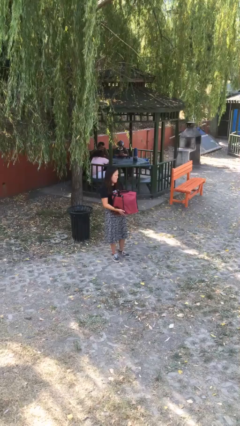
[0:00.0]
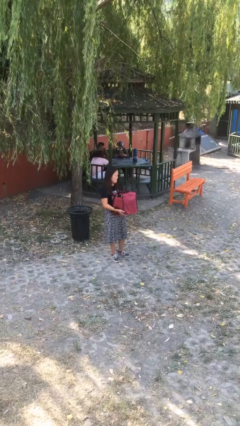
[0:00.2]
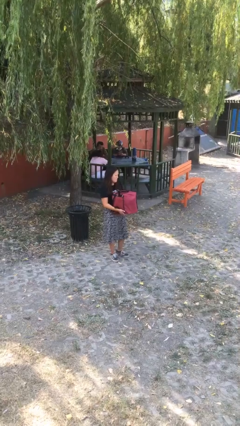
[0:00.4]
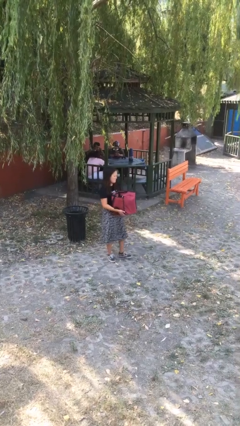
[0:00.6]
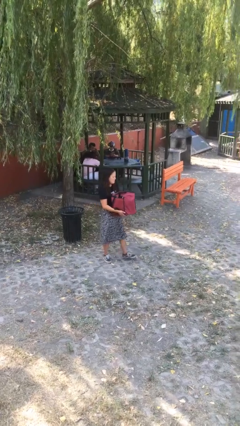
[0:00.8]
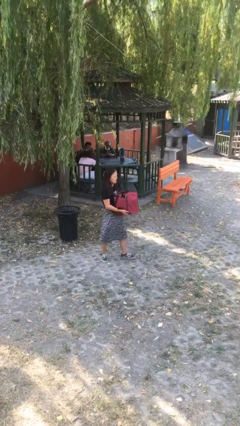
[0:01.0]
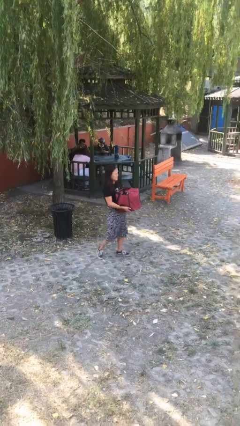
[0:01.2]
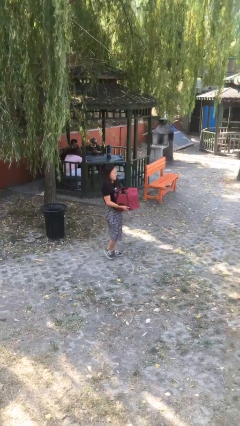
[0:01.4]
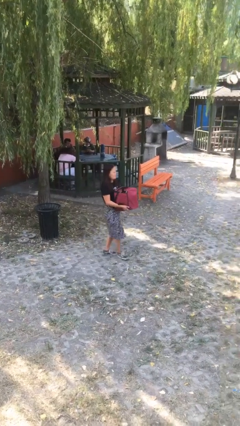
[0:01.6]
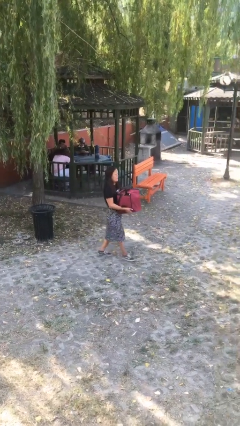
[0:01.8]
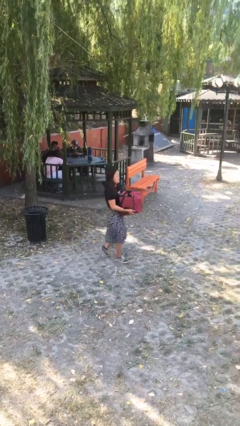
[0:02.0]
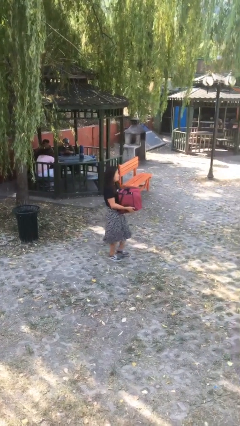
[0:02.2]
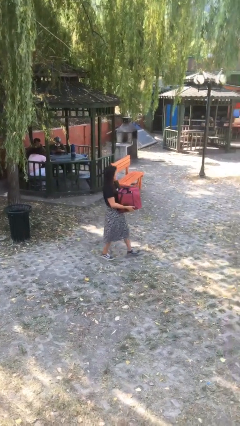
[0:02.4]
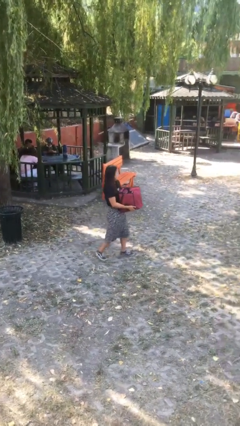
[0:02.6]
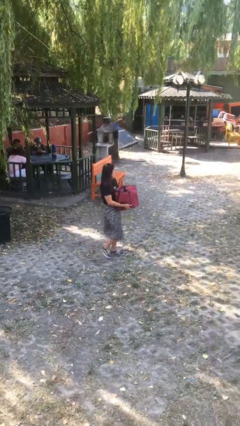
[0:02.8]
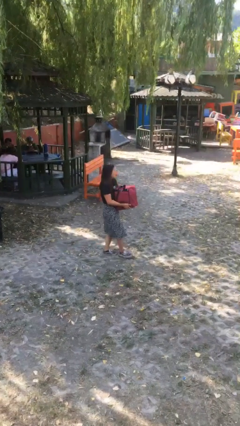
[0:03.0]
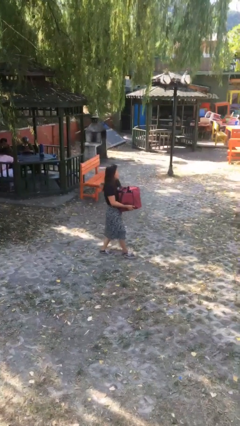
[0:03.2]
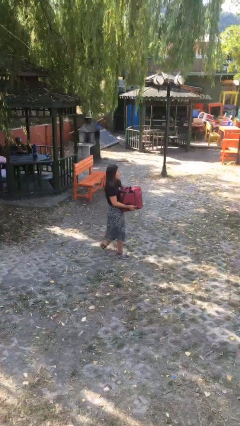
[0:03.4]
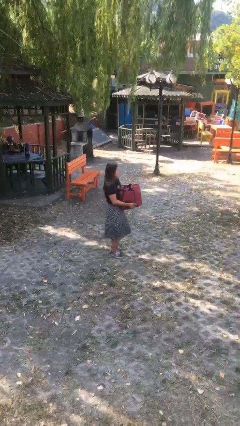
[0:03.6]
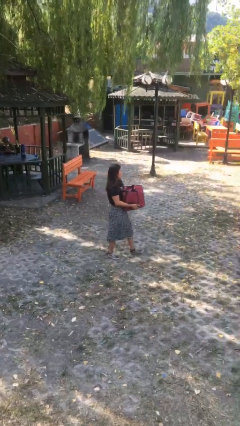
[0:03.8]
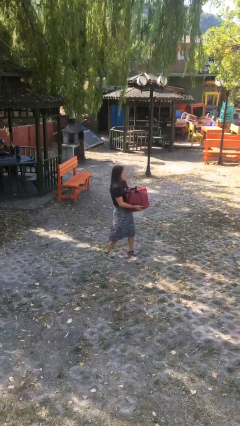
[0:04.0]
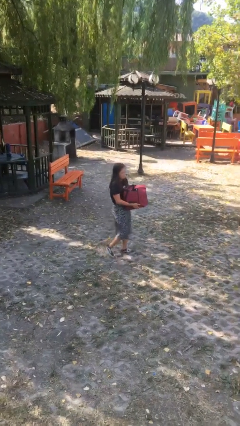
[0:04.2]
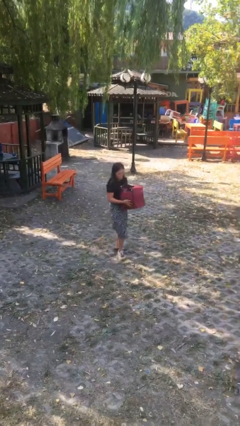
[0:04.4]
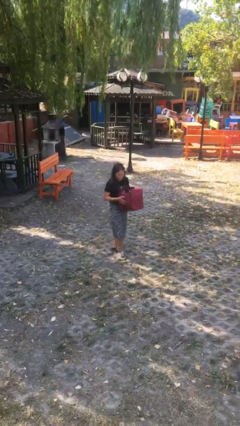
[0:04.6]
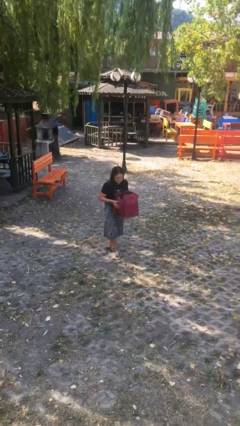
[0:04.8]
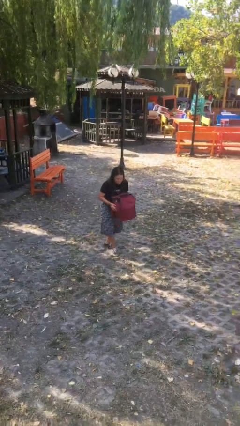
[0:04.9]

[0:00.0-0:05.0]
person carries heavy object

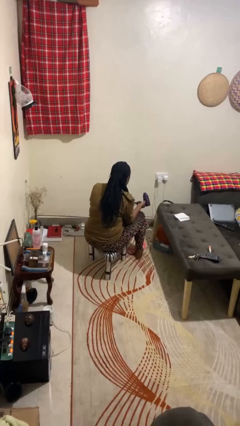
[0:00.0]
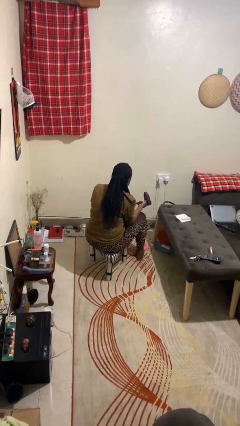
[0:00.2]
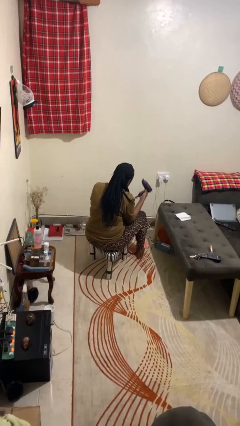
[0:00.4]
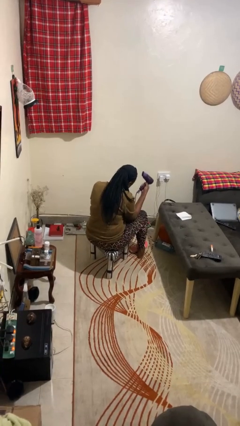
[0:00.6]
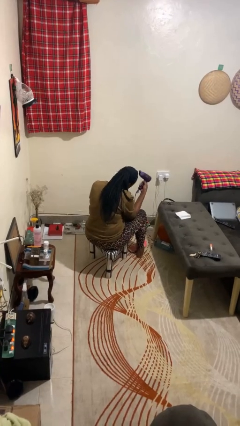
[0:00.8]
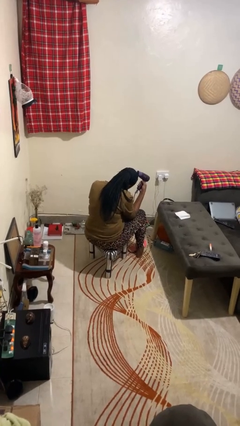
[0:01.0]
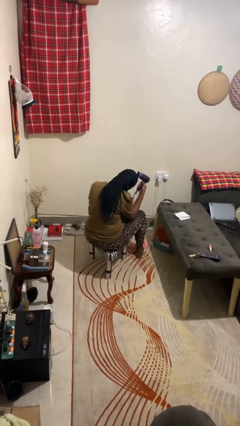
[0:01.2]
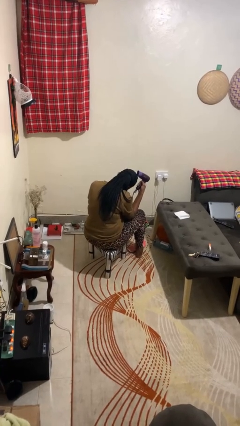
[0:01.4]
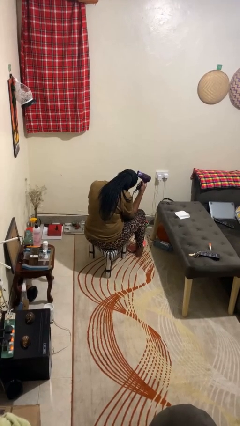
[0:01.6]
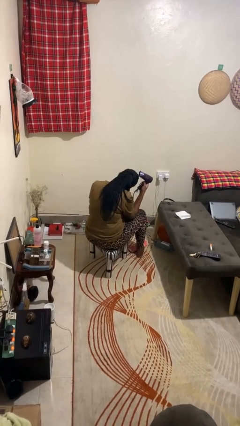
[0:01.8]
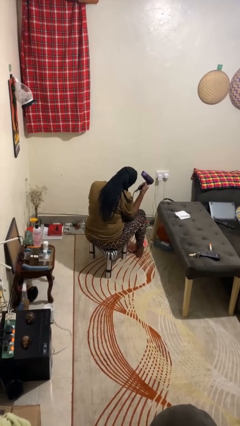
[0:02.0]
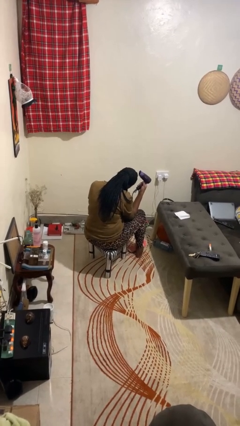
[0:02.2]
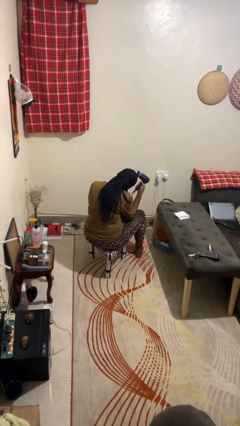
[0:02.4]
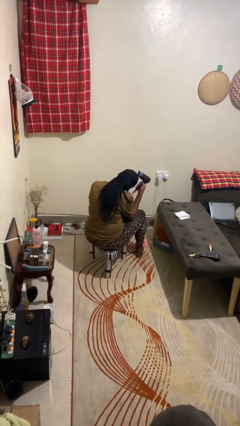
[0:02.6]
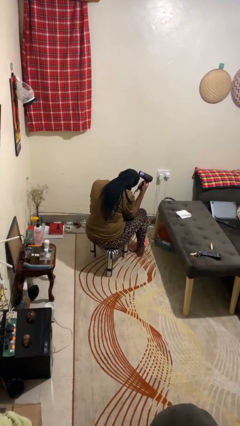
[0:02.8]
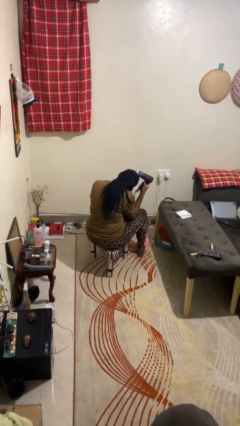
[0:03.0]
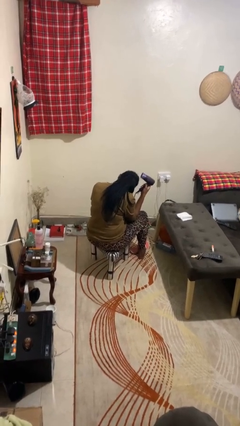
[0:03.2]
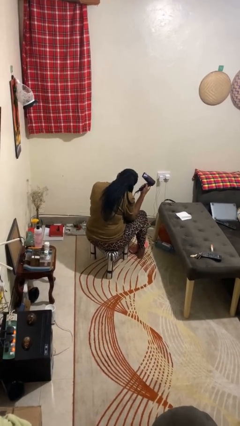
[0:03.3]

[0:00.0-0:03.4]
person dries hair with hairdryer

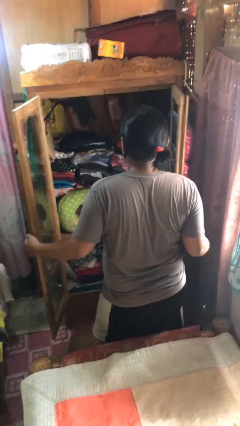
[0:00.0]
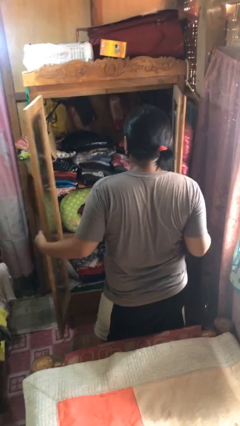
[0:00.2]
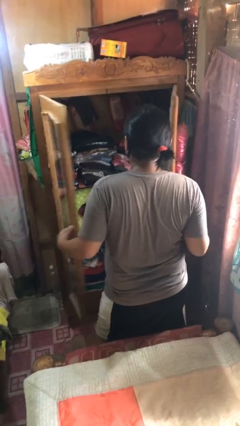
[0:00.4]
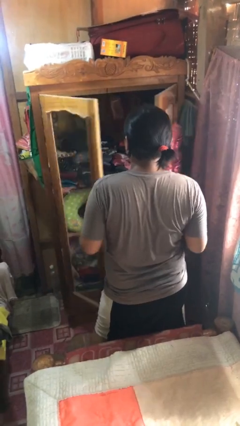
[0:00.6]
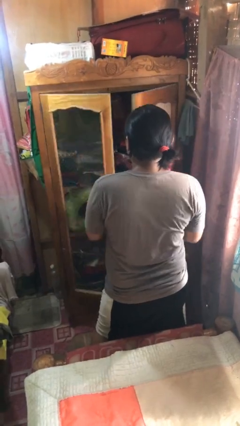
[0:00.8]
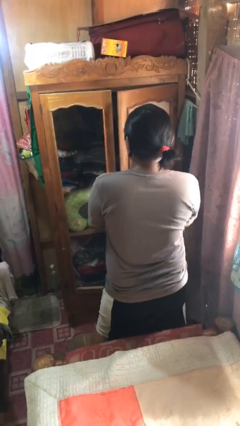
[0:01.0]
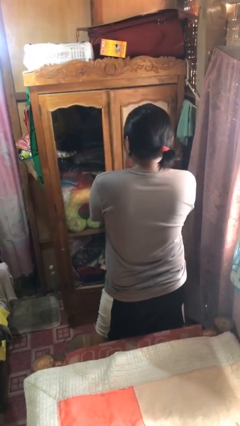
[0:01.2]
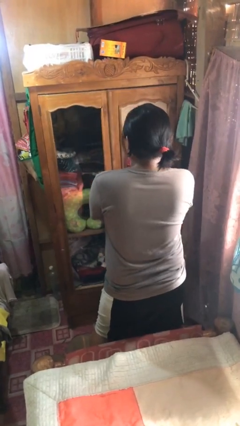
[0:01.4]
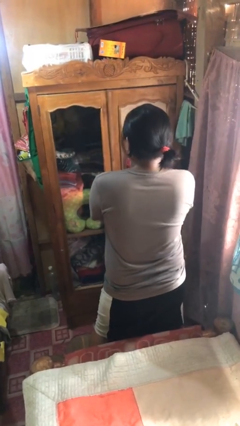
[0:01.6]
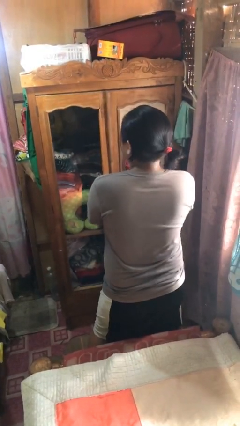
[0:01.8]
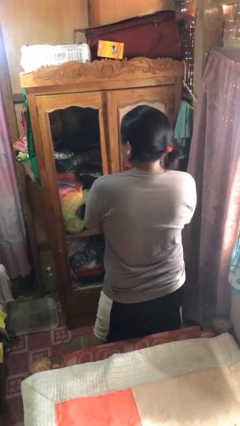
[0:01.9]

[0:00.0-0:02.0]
person closes closet door

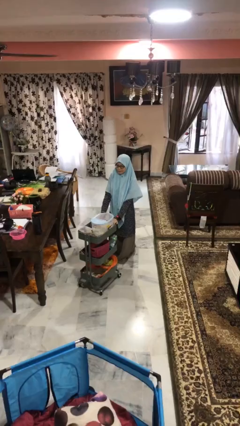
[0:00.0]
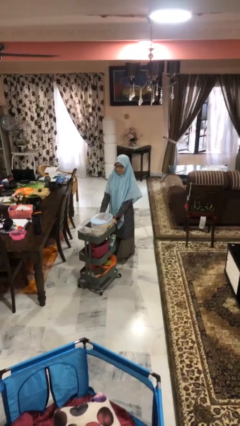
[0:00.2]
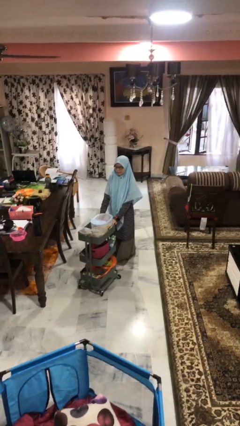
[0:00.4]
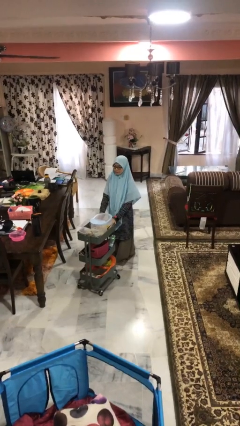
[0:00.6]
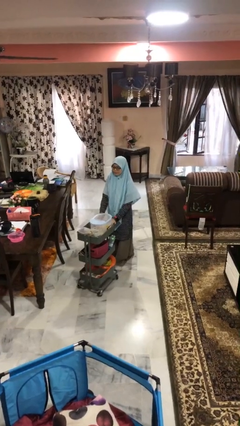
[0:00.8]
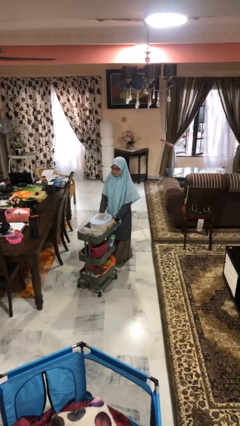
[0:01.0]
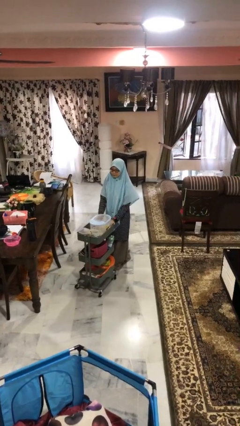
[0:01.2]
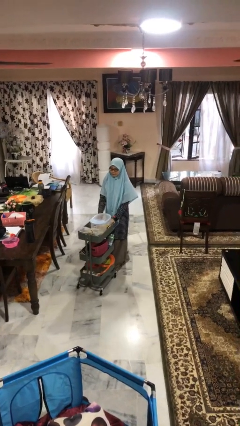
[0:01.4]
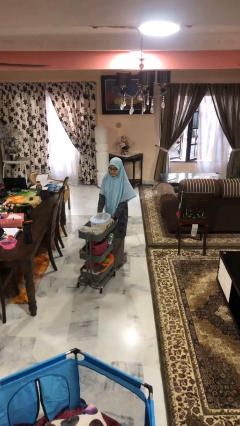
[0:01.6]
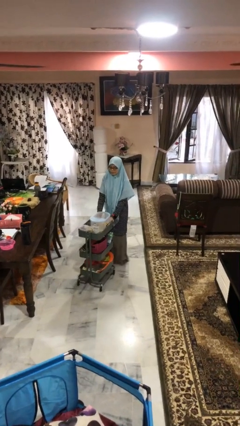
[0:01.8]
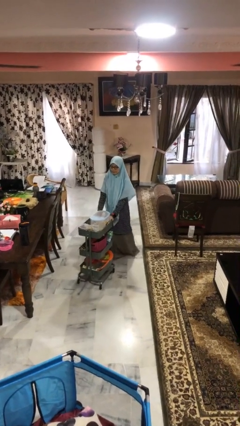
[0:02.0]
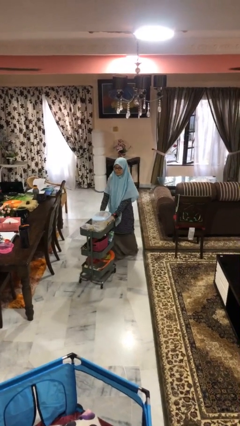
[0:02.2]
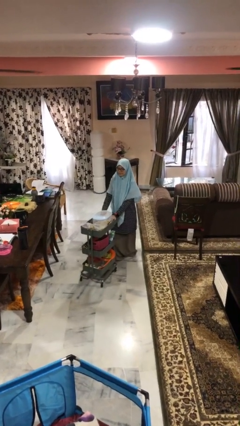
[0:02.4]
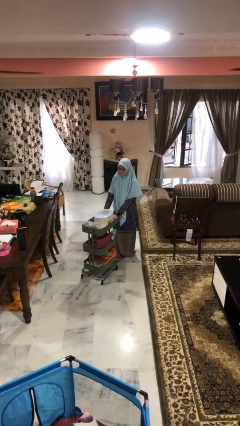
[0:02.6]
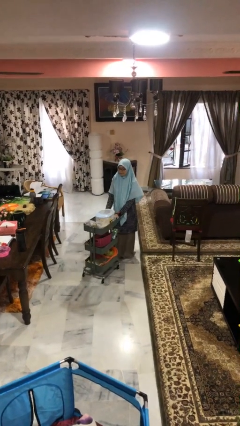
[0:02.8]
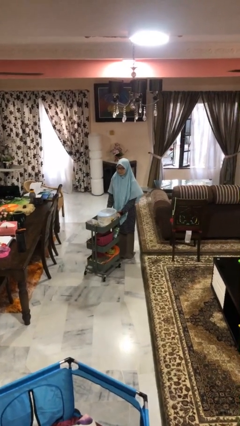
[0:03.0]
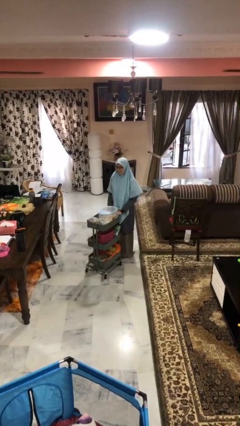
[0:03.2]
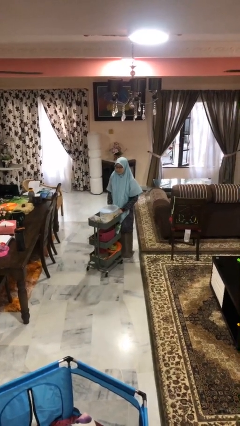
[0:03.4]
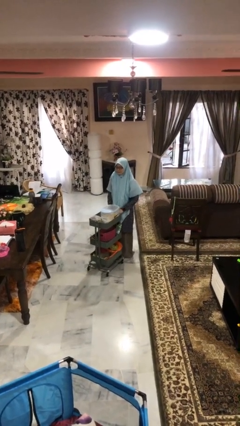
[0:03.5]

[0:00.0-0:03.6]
person pulls wheeled cart

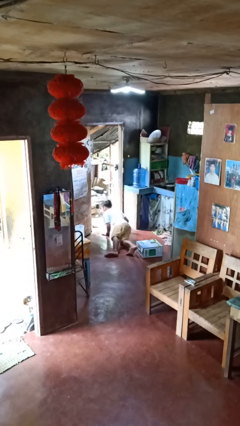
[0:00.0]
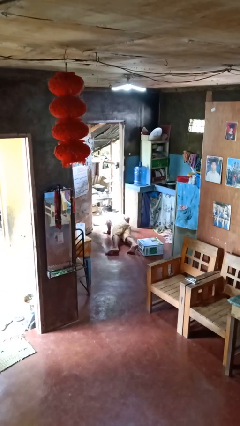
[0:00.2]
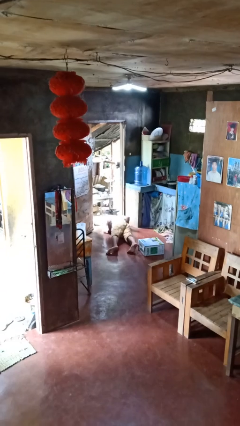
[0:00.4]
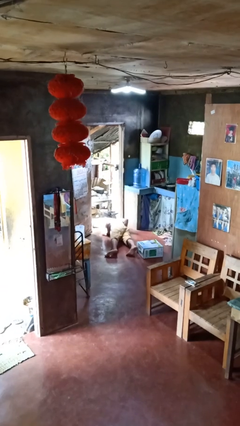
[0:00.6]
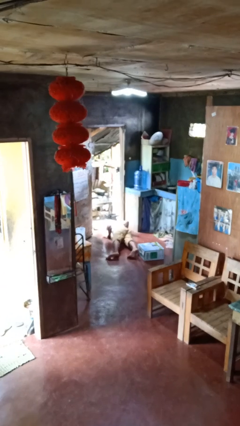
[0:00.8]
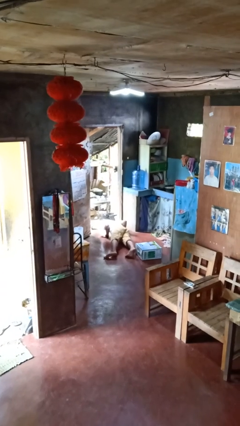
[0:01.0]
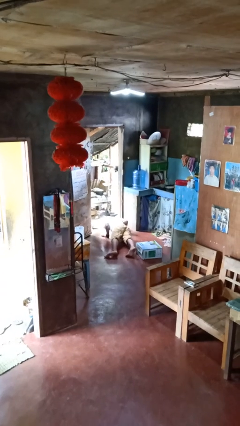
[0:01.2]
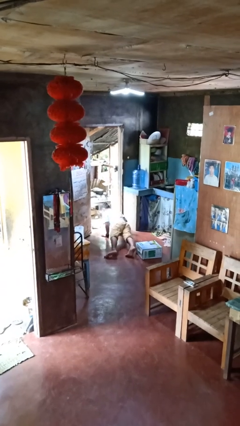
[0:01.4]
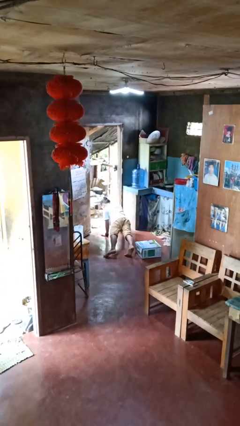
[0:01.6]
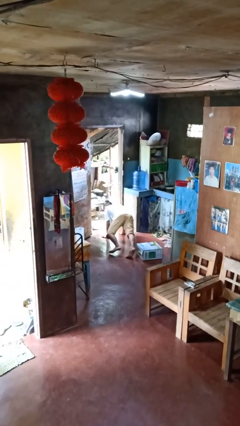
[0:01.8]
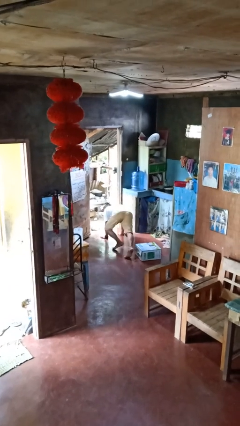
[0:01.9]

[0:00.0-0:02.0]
person lies down on floor

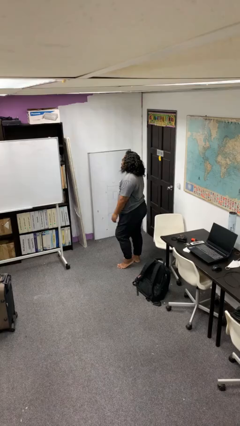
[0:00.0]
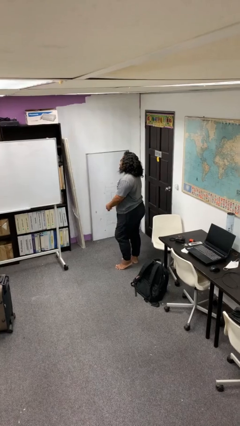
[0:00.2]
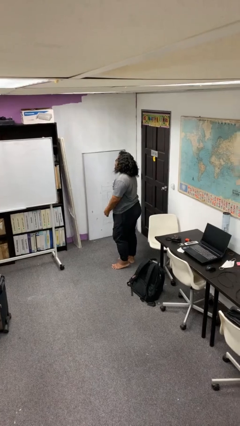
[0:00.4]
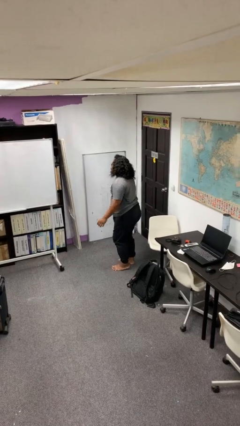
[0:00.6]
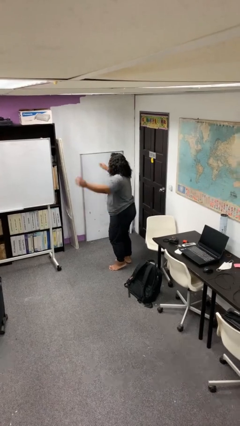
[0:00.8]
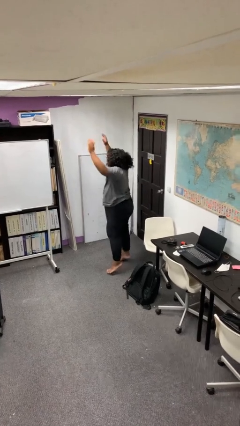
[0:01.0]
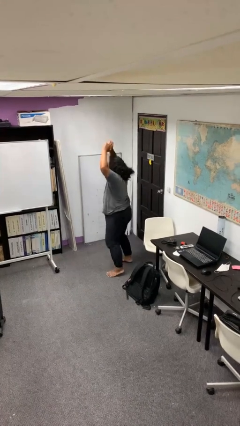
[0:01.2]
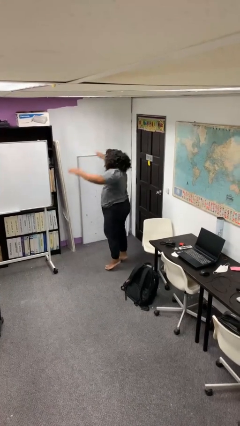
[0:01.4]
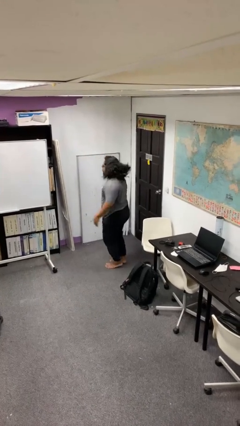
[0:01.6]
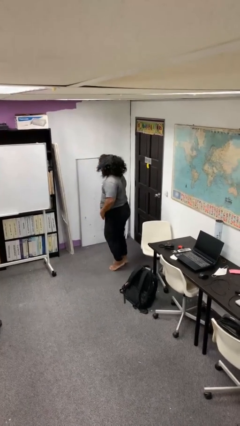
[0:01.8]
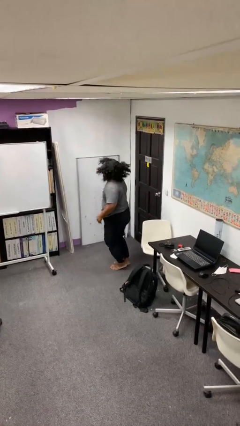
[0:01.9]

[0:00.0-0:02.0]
person exercises with jumping jacks
